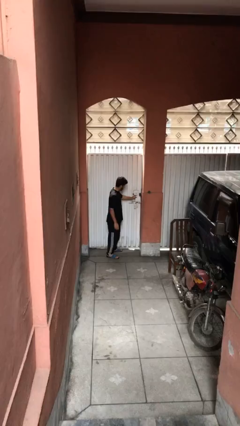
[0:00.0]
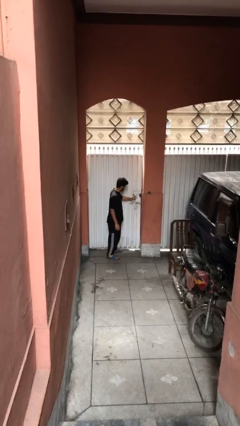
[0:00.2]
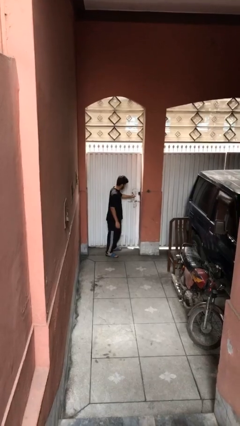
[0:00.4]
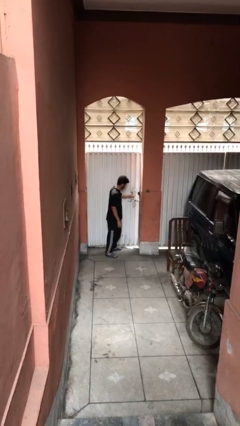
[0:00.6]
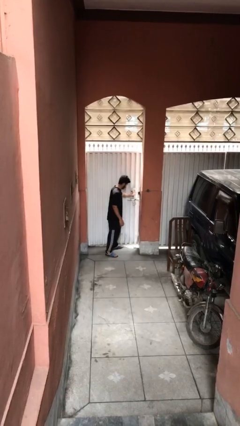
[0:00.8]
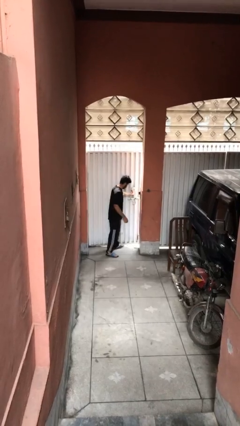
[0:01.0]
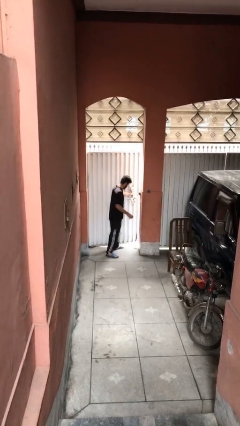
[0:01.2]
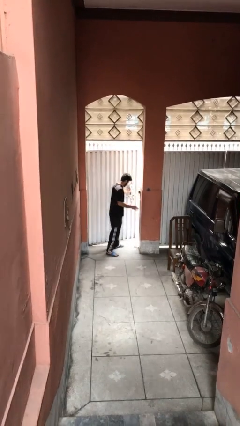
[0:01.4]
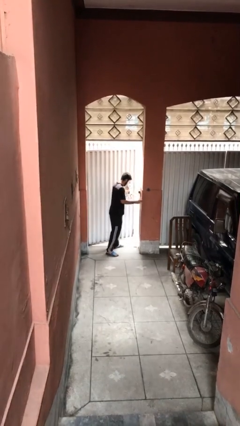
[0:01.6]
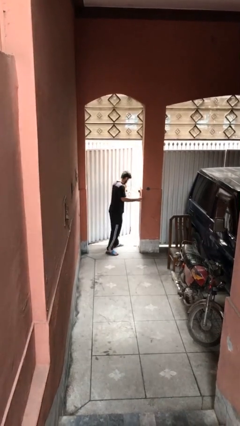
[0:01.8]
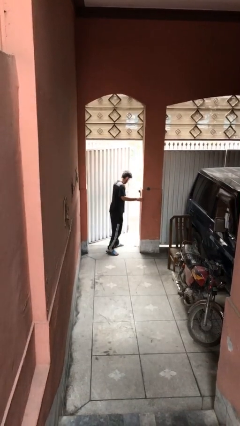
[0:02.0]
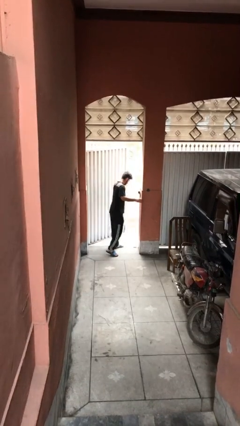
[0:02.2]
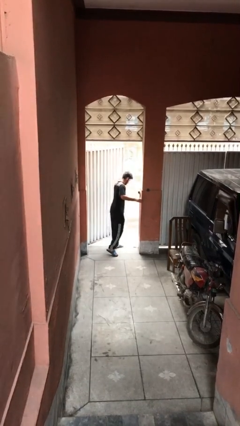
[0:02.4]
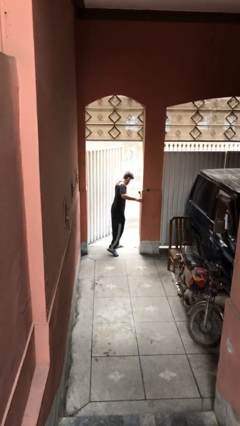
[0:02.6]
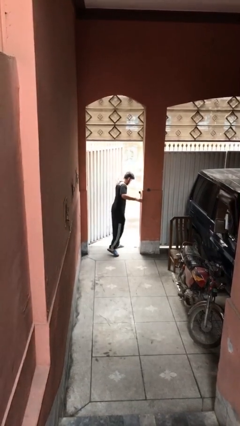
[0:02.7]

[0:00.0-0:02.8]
person opens facility door

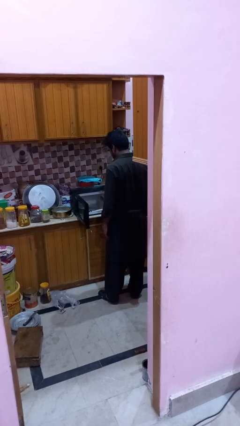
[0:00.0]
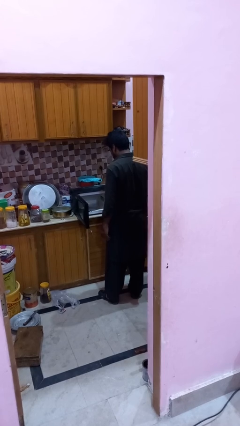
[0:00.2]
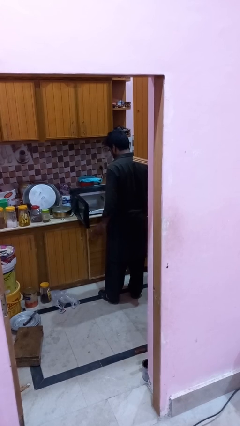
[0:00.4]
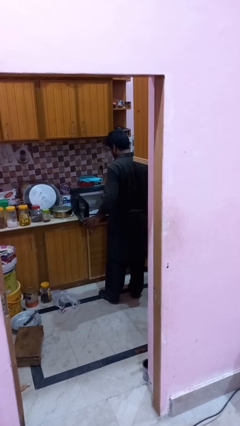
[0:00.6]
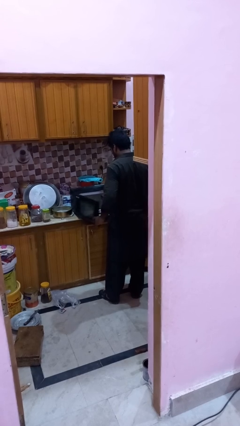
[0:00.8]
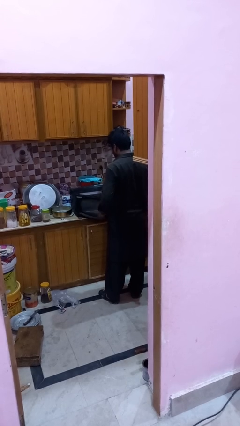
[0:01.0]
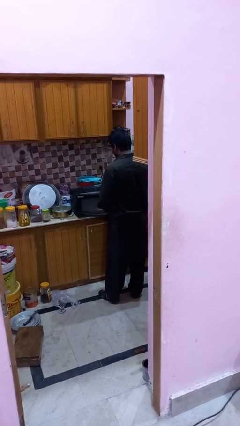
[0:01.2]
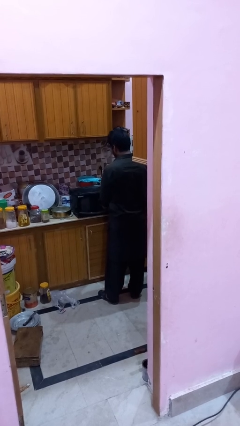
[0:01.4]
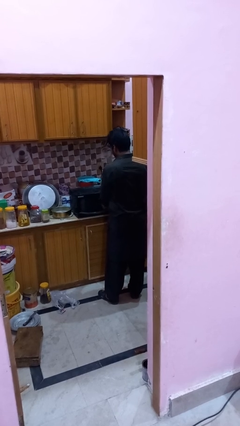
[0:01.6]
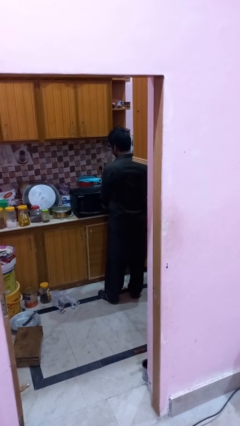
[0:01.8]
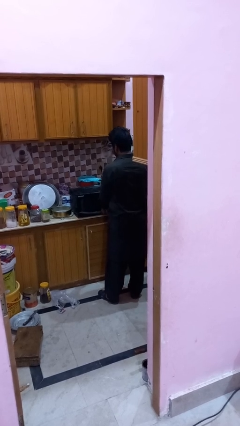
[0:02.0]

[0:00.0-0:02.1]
person closes oven door

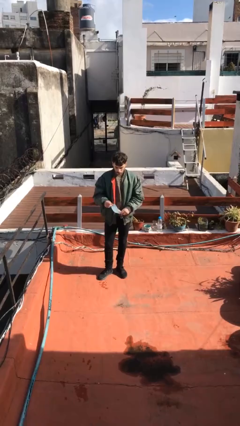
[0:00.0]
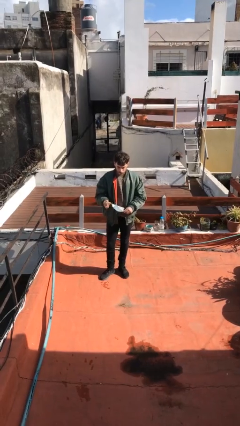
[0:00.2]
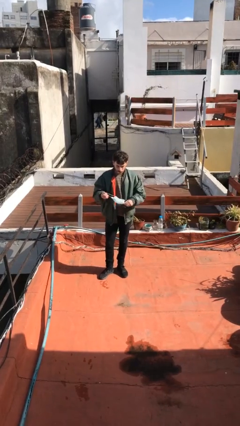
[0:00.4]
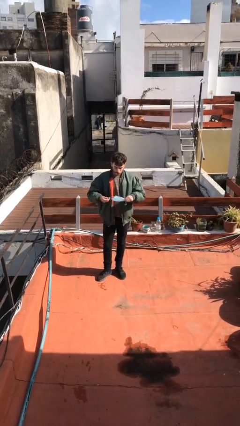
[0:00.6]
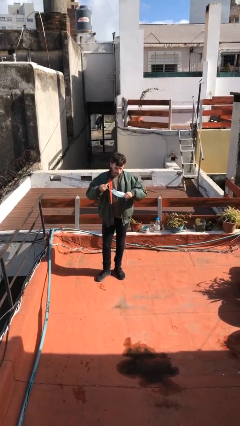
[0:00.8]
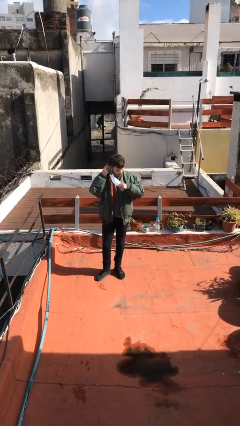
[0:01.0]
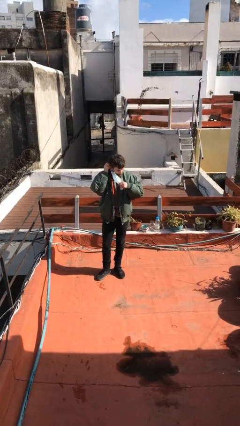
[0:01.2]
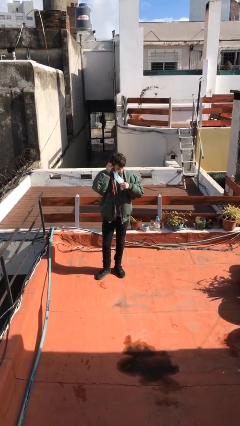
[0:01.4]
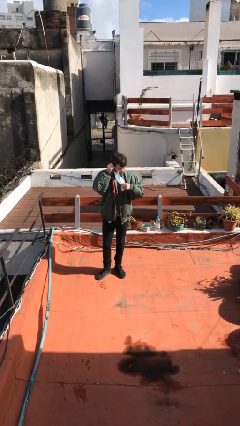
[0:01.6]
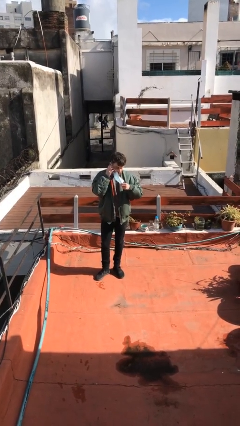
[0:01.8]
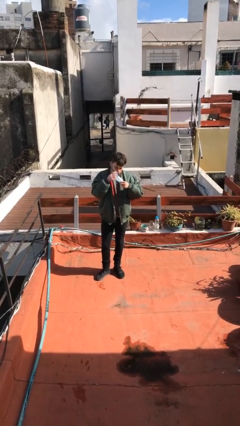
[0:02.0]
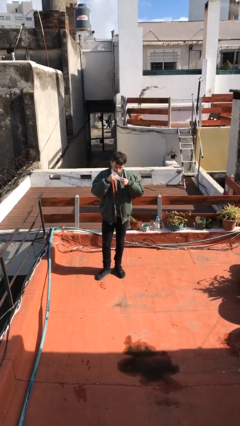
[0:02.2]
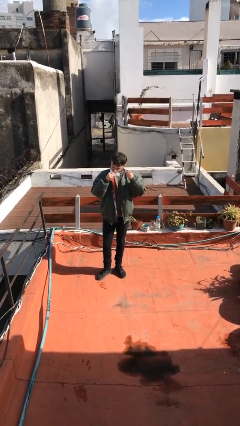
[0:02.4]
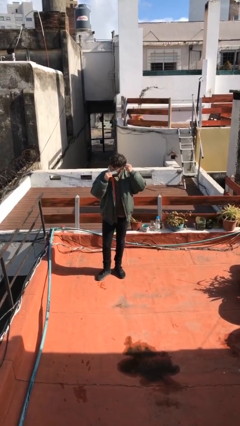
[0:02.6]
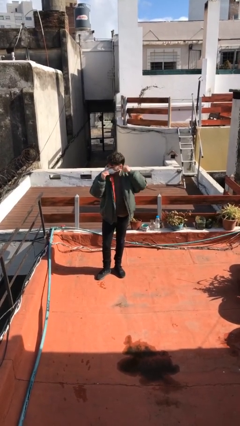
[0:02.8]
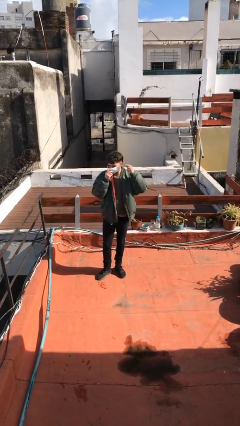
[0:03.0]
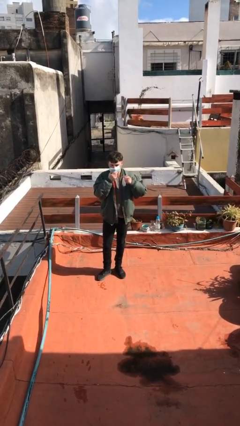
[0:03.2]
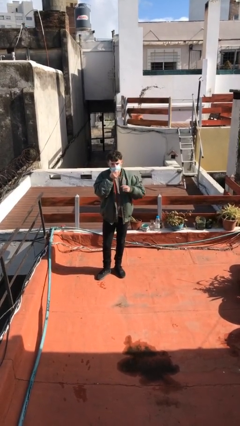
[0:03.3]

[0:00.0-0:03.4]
person puts on facemask

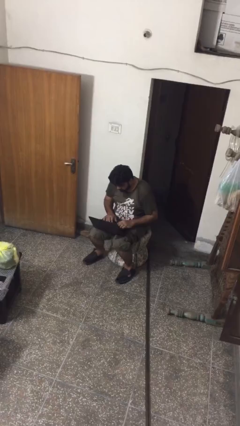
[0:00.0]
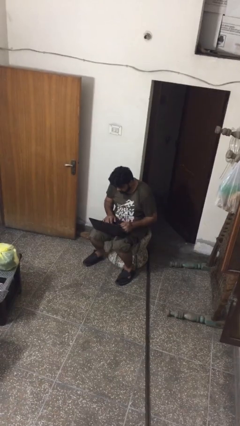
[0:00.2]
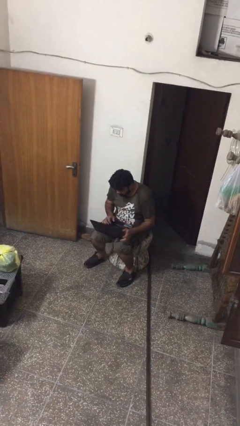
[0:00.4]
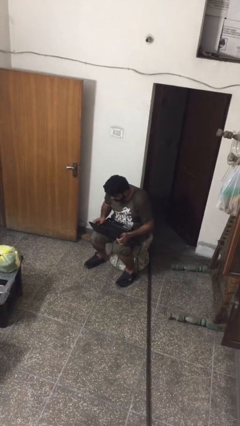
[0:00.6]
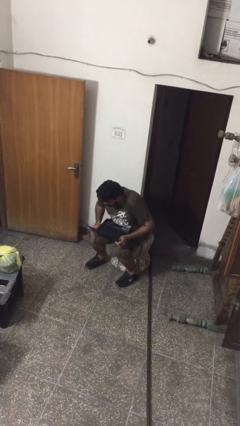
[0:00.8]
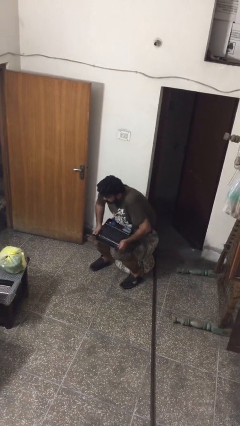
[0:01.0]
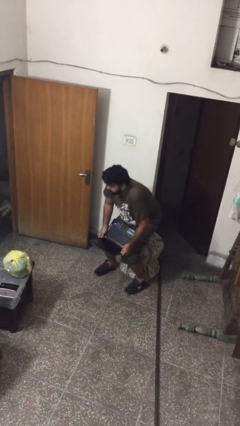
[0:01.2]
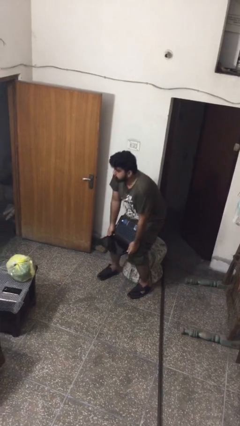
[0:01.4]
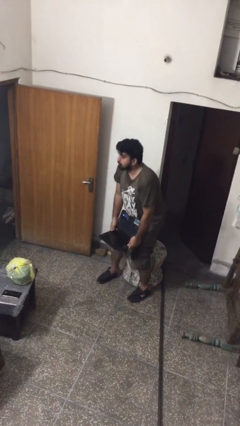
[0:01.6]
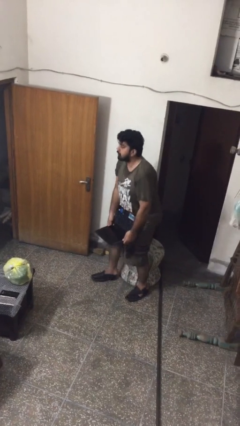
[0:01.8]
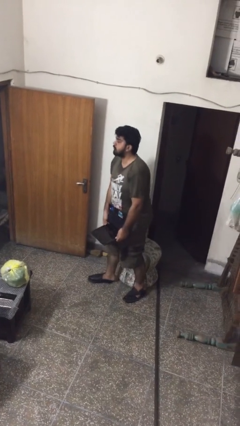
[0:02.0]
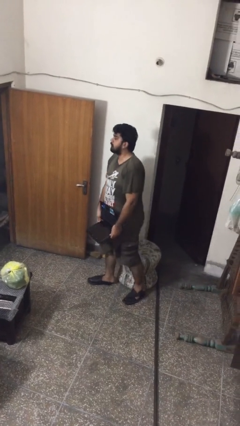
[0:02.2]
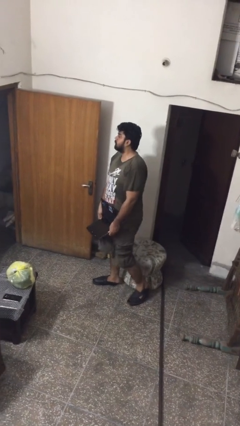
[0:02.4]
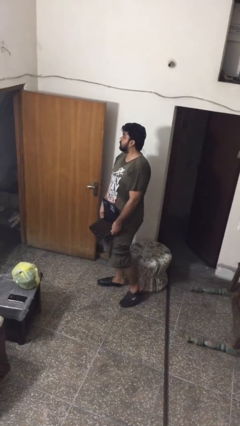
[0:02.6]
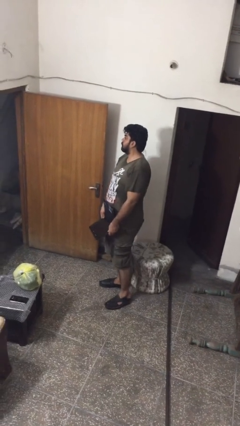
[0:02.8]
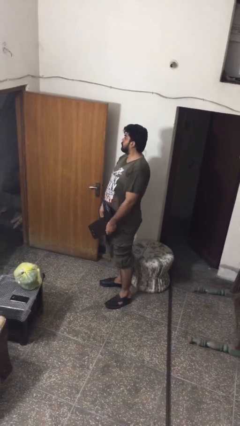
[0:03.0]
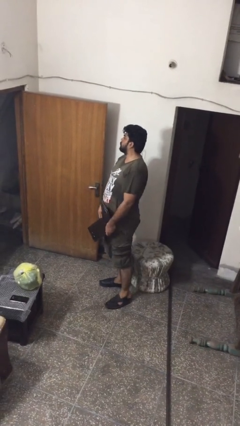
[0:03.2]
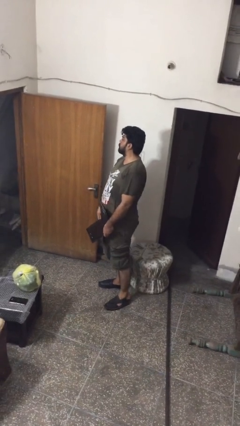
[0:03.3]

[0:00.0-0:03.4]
person stands up

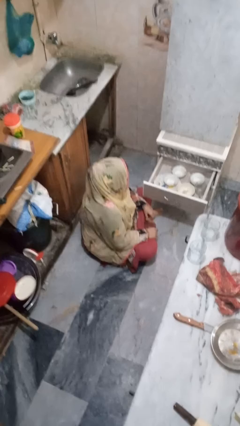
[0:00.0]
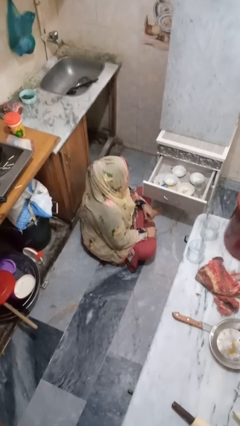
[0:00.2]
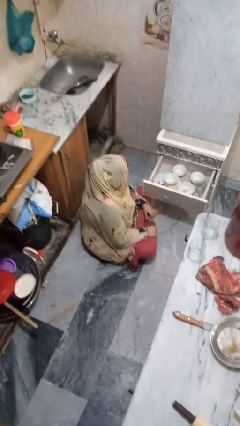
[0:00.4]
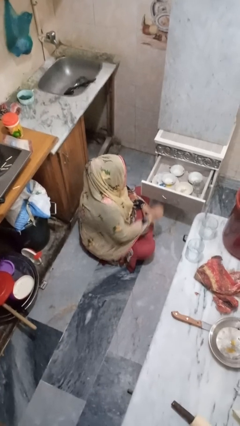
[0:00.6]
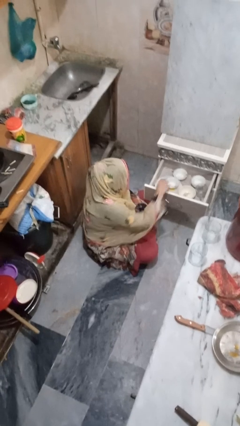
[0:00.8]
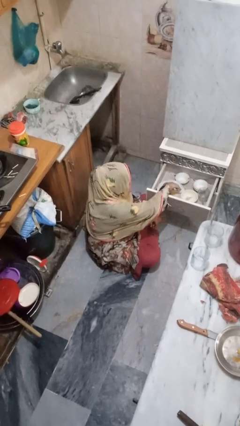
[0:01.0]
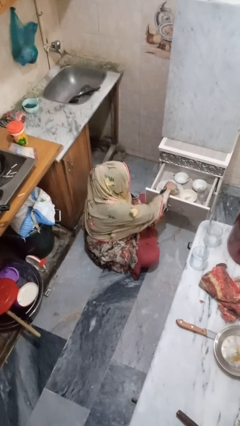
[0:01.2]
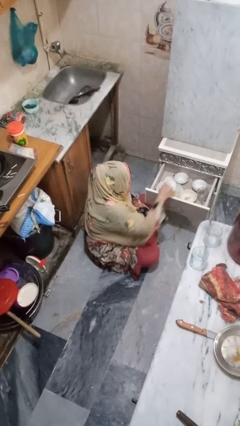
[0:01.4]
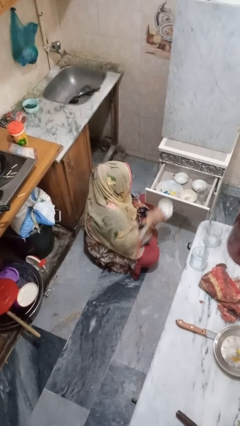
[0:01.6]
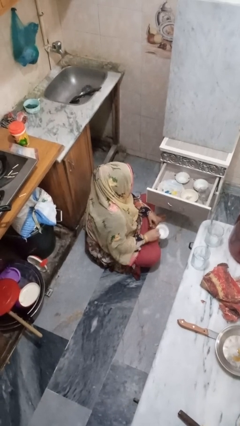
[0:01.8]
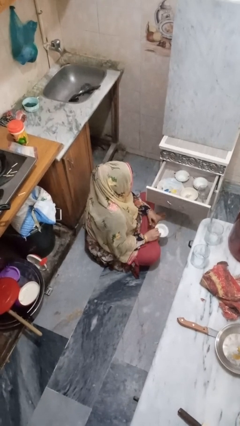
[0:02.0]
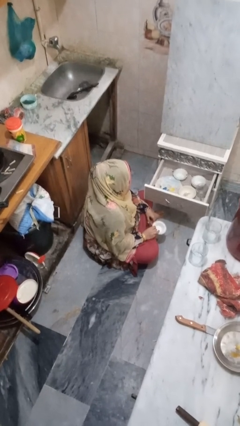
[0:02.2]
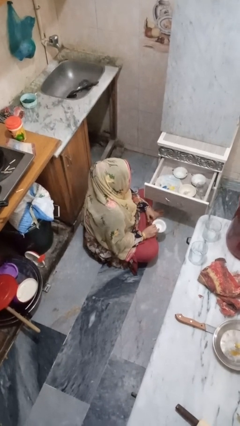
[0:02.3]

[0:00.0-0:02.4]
person takes object from kitchen drawer

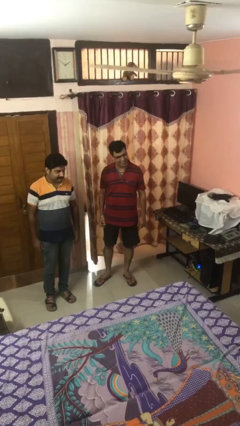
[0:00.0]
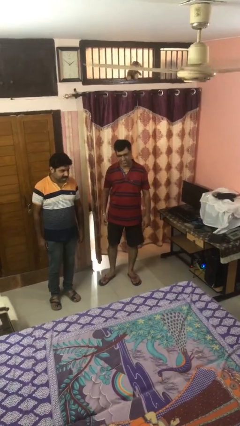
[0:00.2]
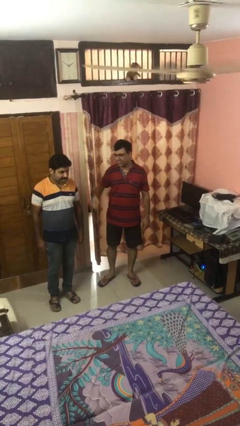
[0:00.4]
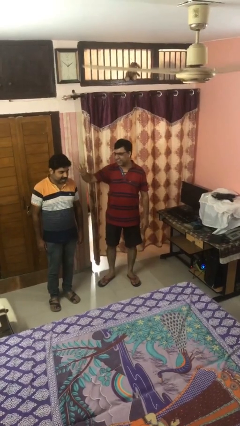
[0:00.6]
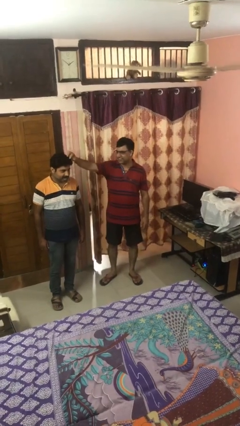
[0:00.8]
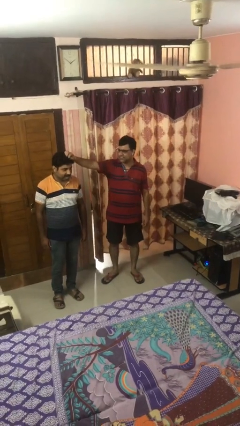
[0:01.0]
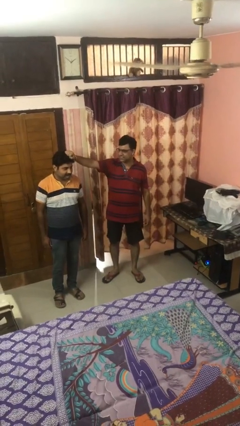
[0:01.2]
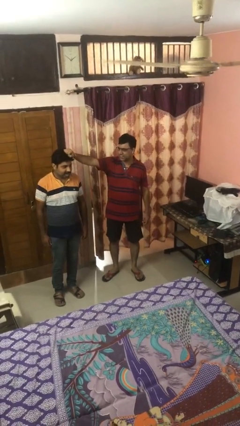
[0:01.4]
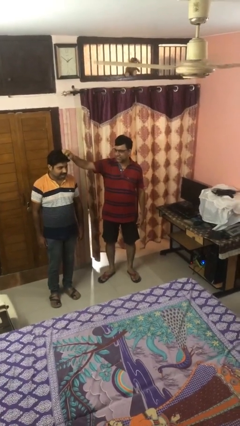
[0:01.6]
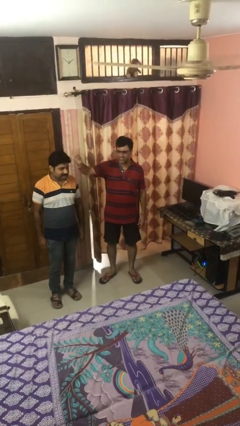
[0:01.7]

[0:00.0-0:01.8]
person grabs person by hair

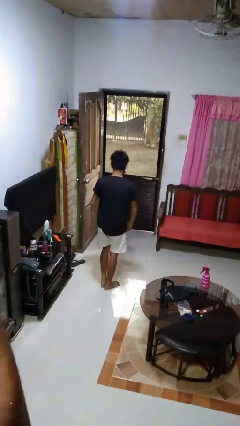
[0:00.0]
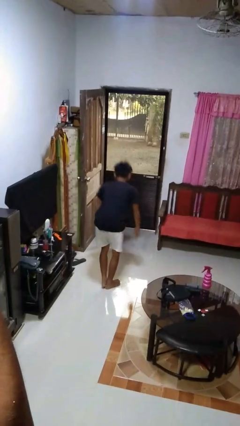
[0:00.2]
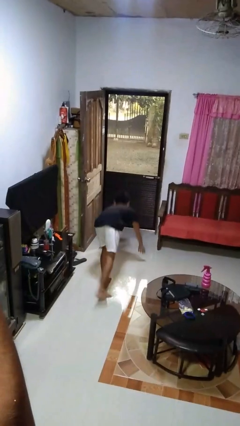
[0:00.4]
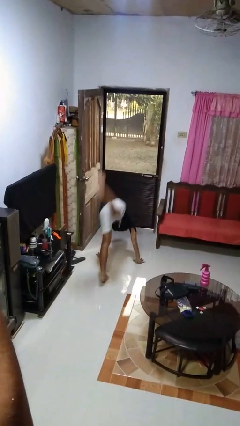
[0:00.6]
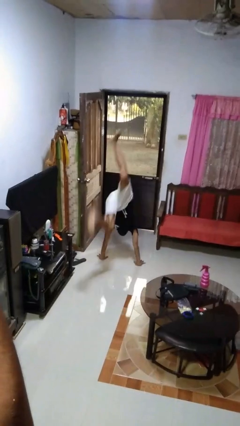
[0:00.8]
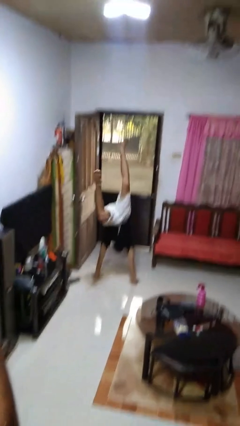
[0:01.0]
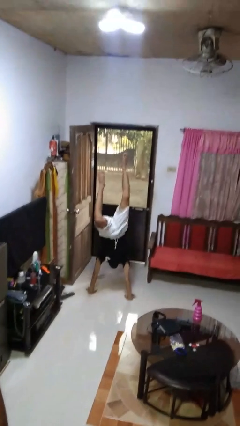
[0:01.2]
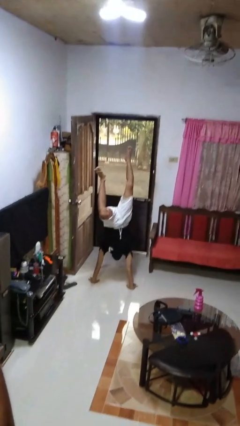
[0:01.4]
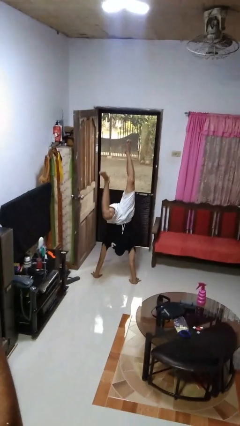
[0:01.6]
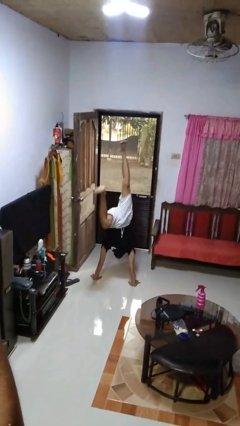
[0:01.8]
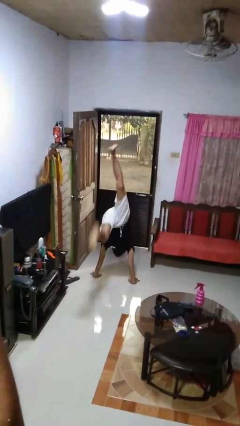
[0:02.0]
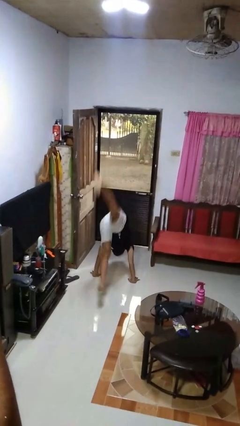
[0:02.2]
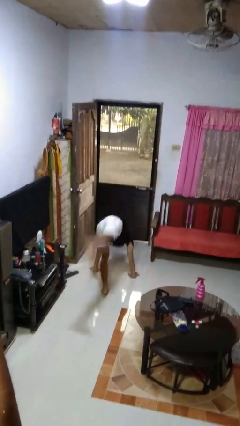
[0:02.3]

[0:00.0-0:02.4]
person handstand
